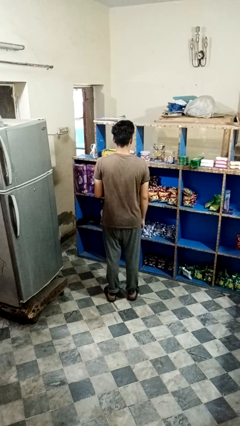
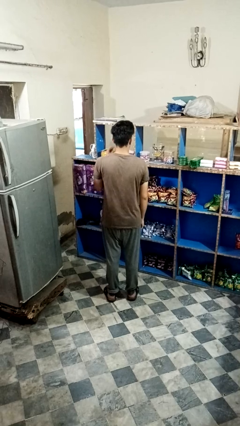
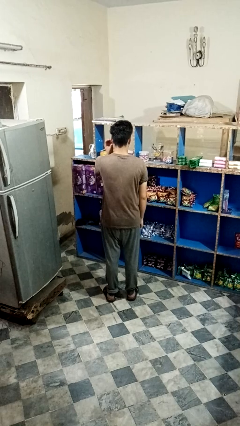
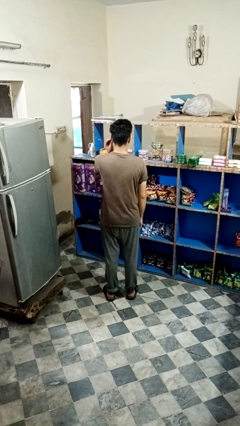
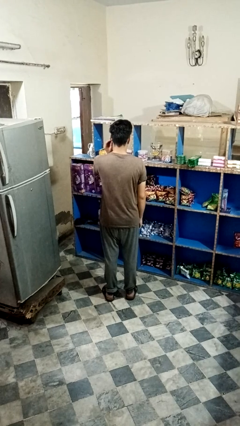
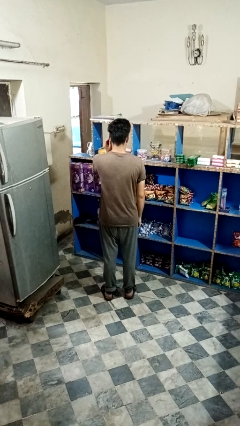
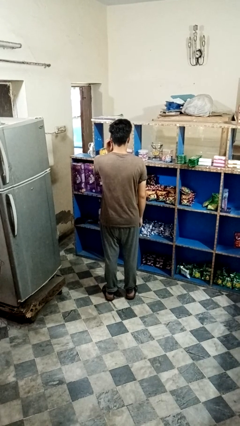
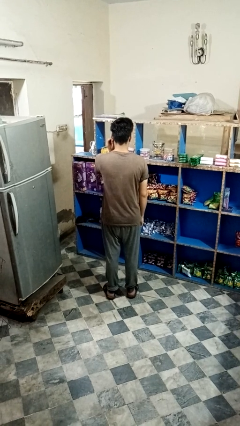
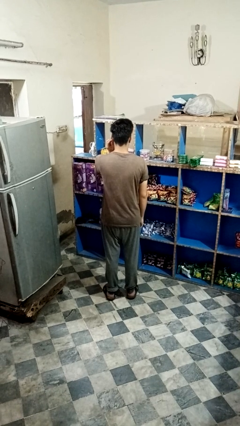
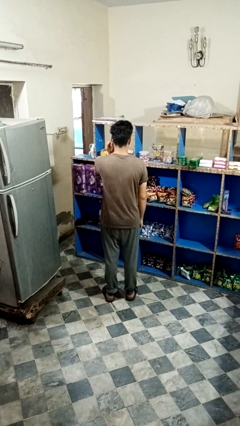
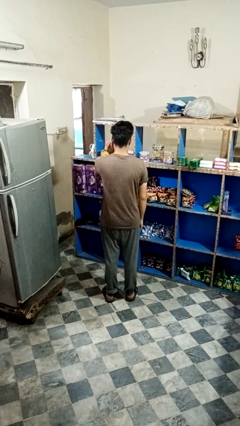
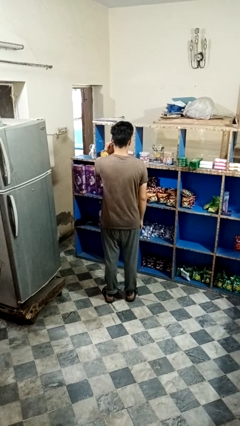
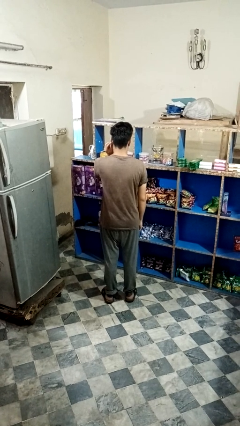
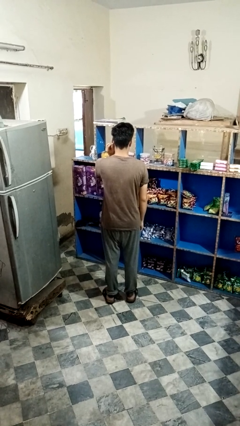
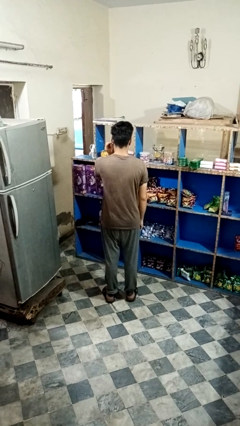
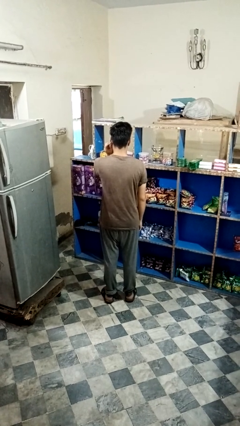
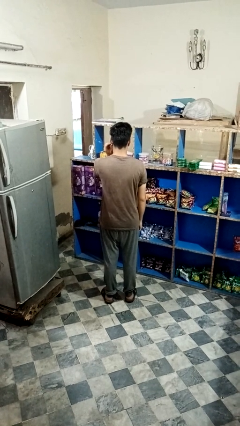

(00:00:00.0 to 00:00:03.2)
person touches earlobe

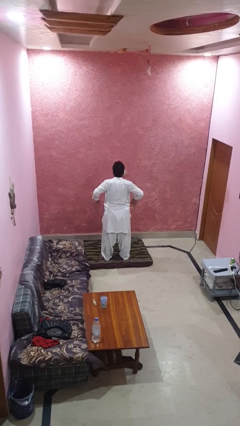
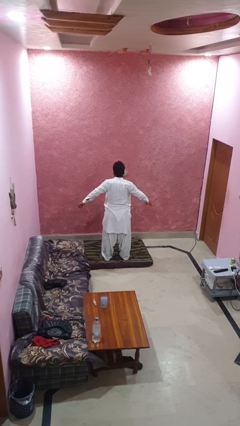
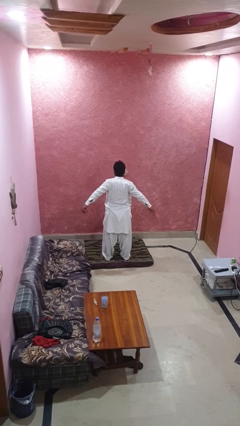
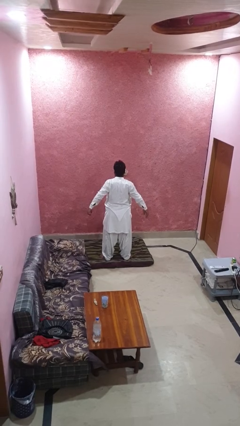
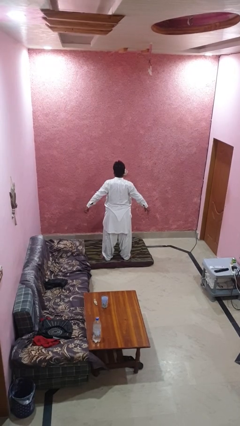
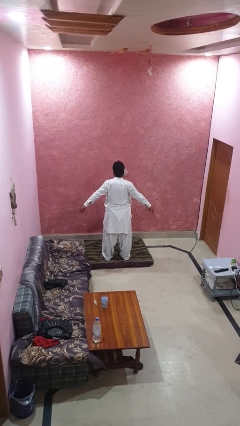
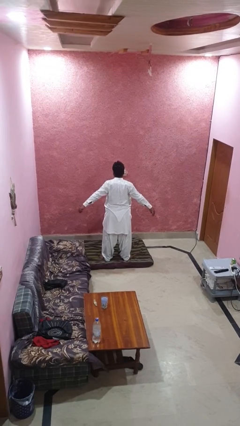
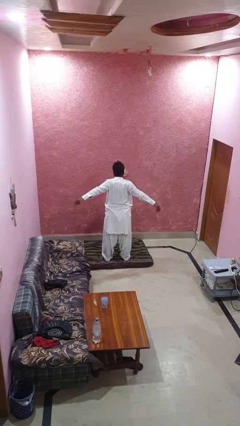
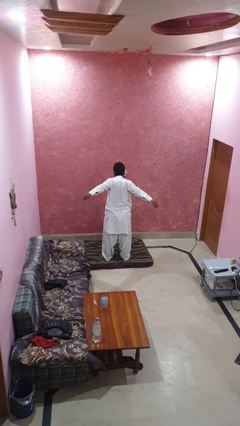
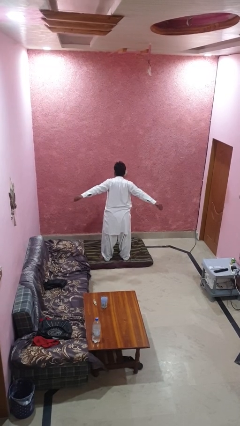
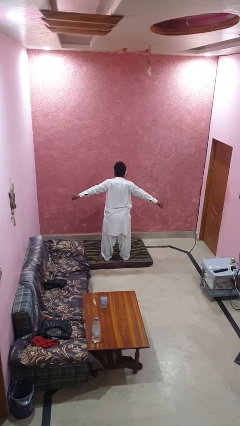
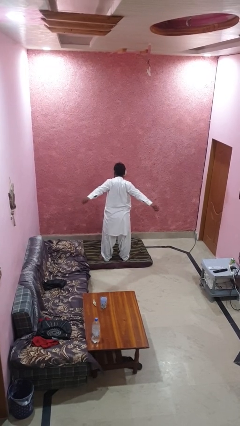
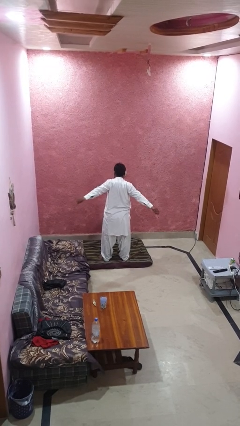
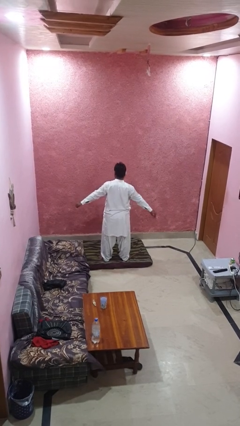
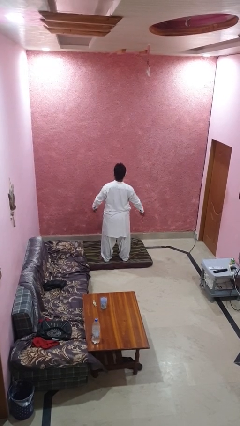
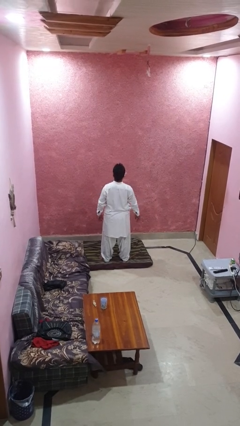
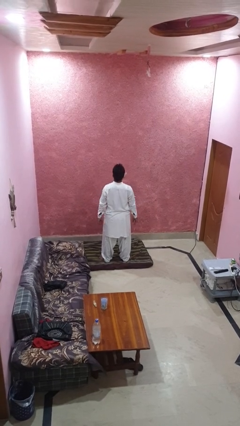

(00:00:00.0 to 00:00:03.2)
person stretches arms to side

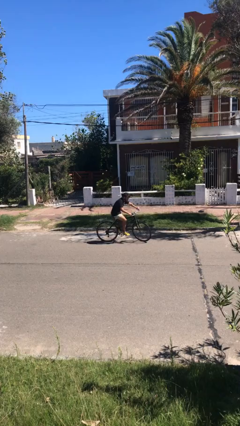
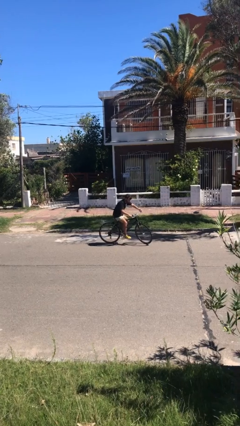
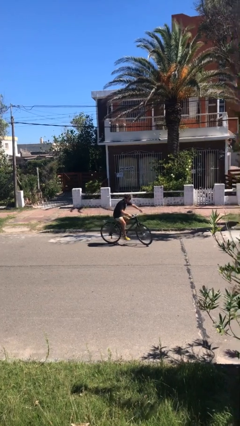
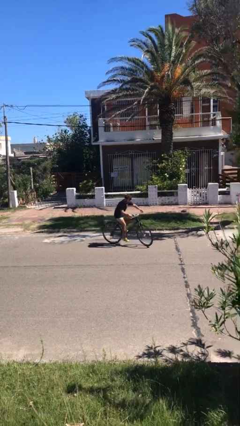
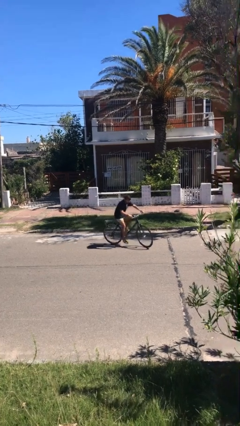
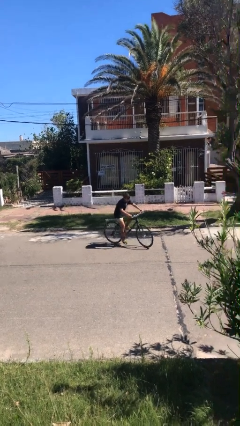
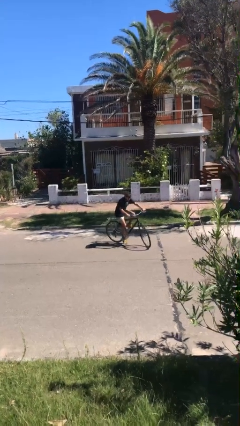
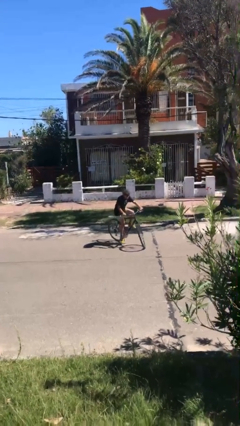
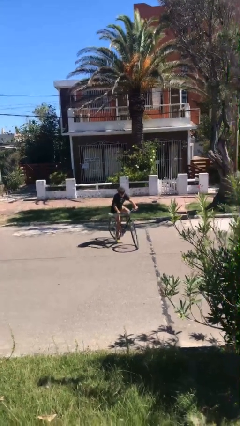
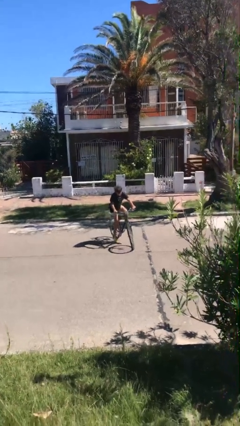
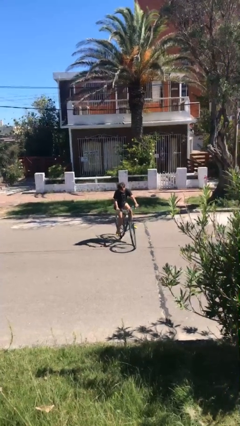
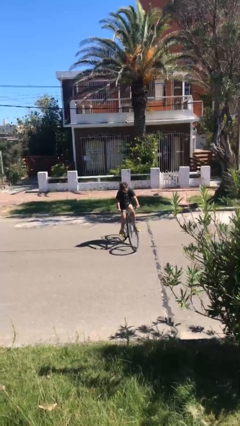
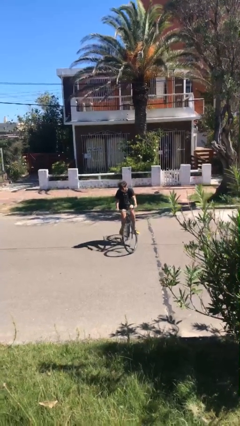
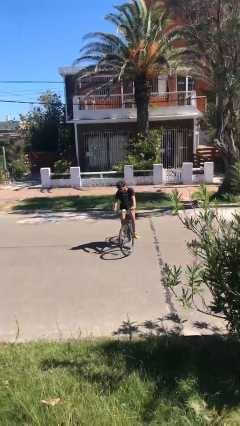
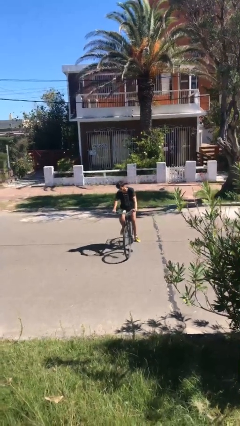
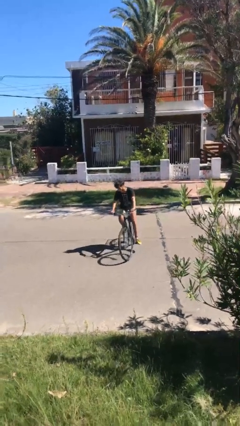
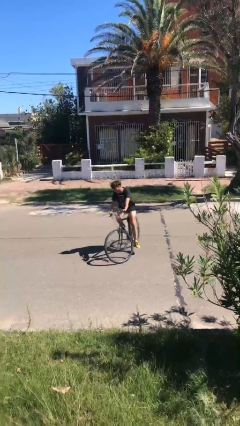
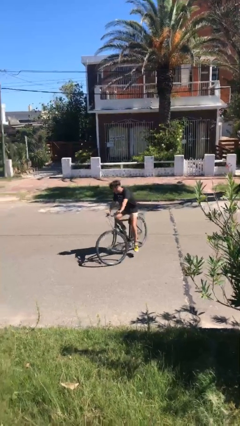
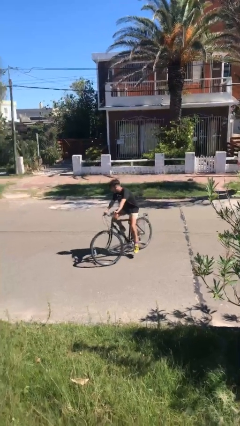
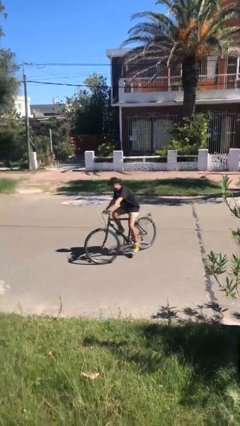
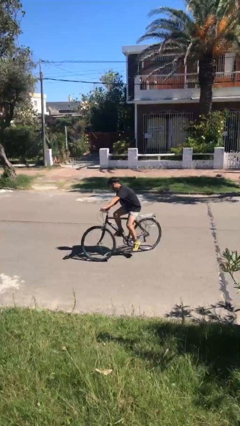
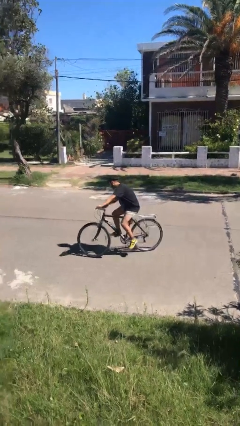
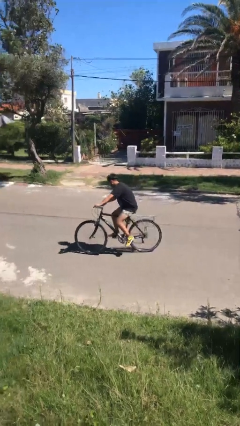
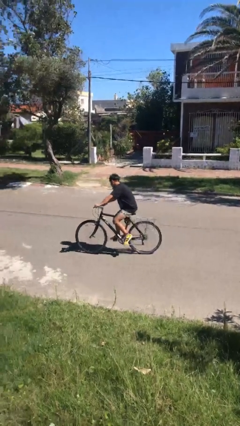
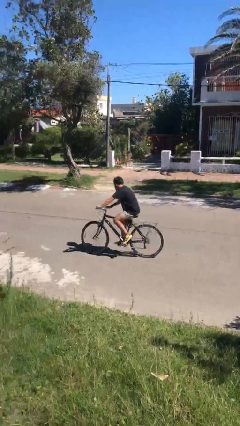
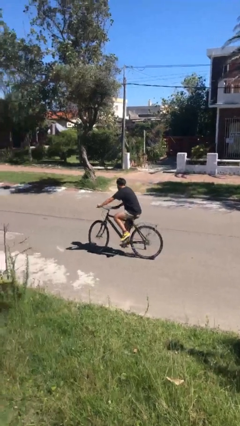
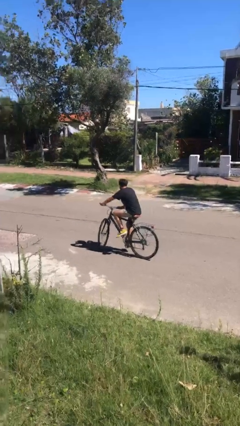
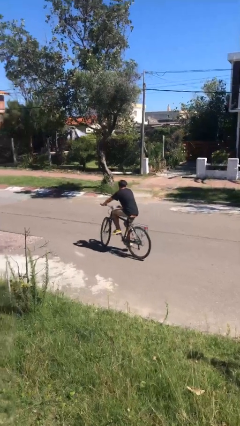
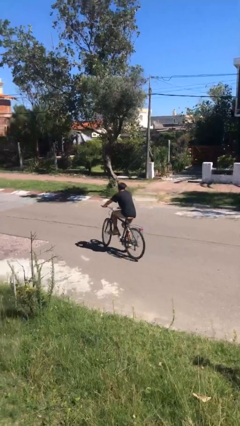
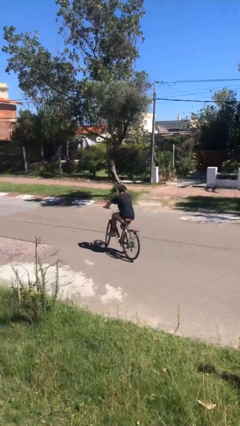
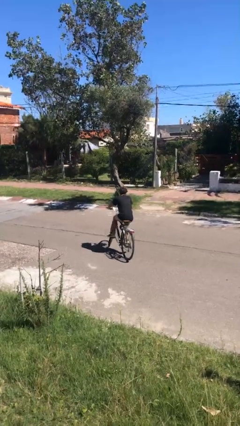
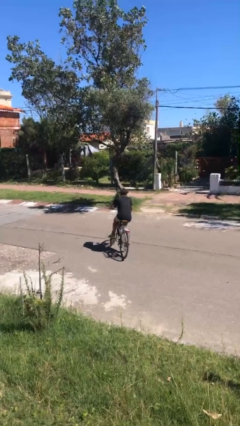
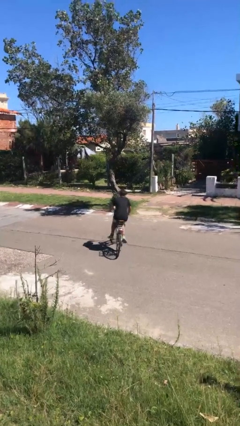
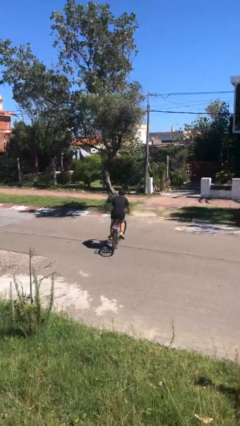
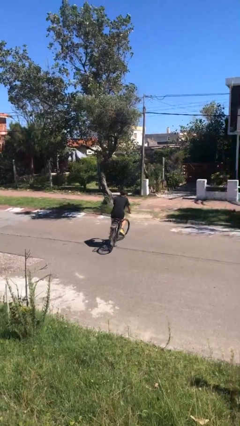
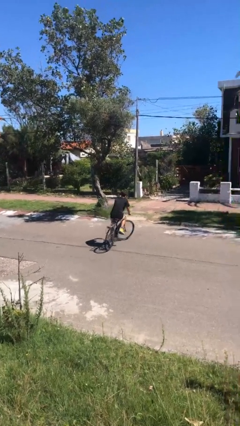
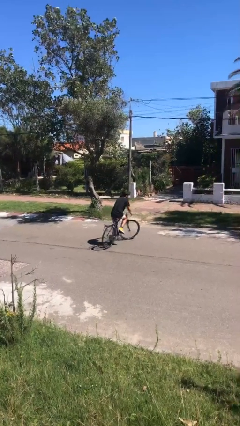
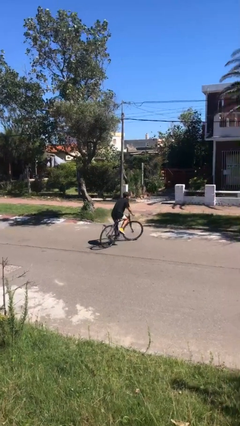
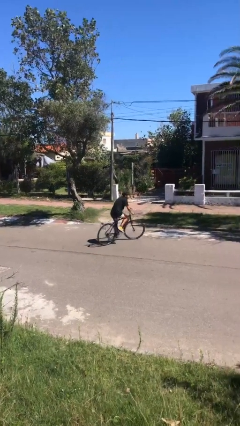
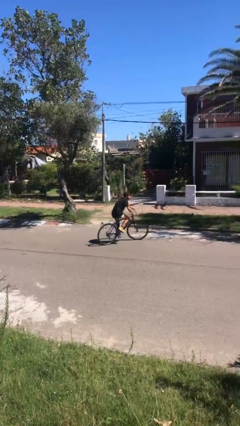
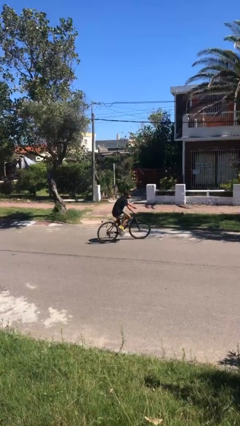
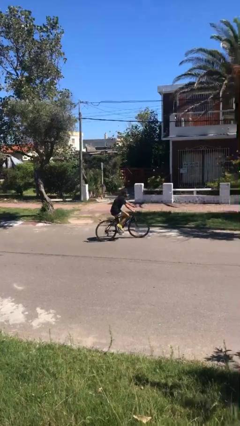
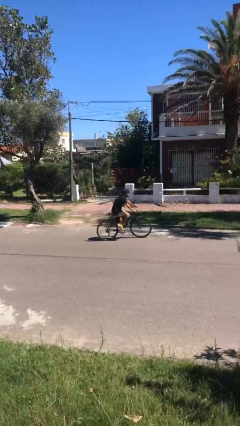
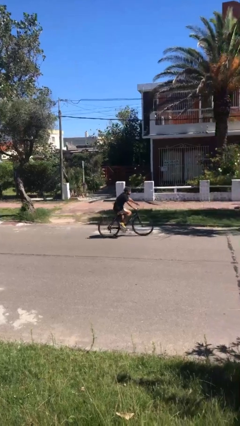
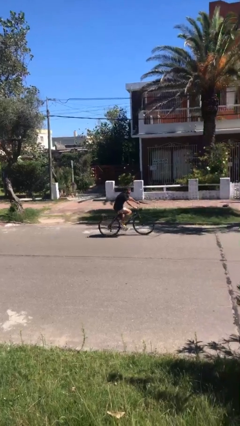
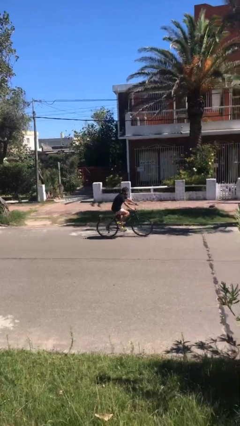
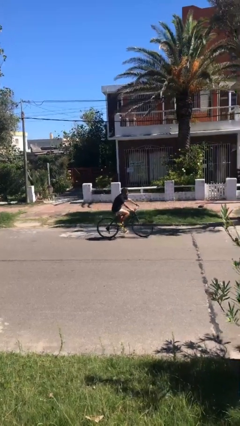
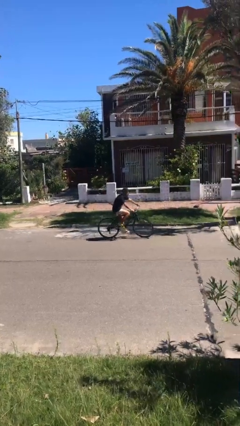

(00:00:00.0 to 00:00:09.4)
person rides bicycle

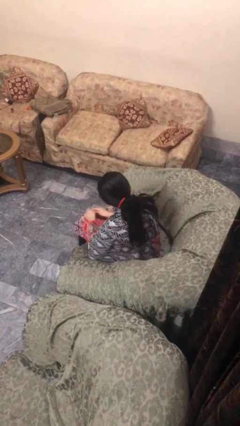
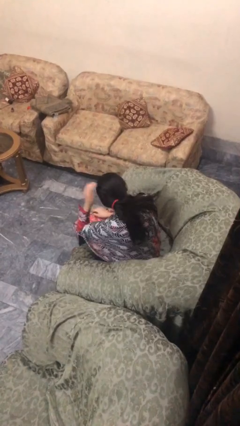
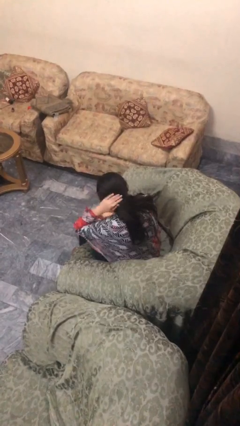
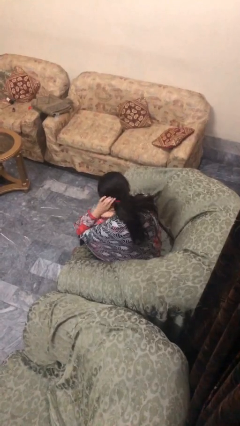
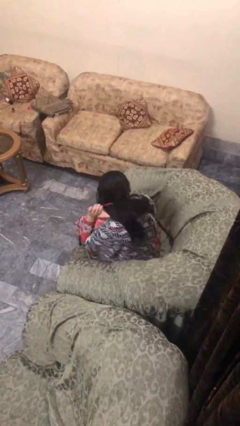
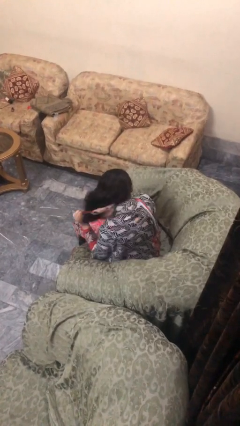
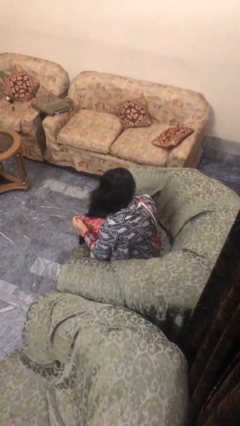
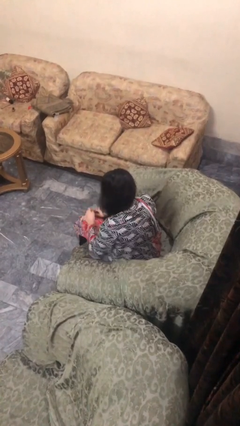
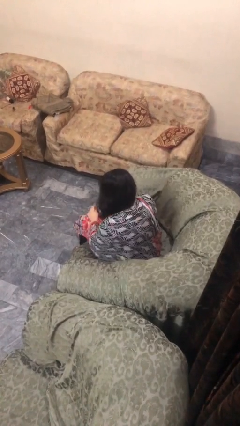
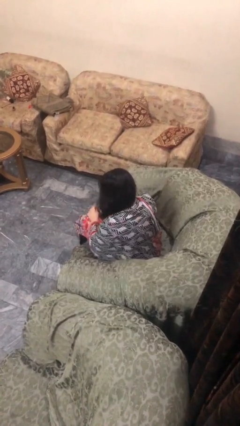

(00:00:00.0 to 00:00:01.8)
person takes off hairtie

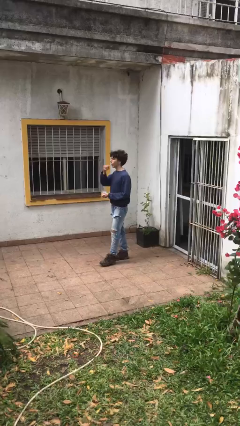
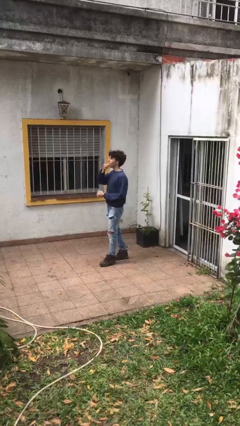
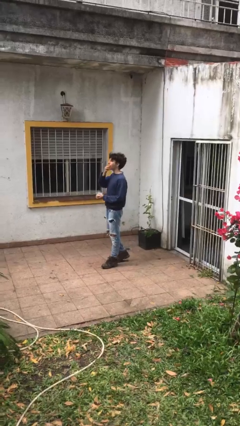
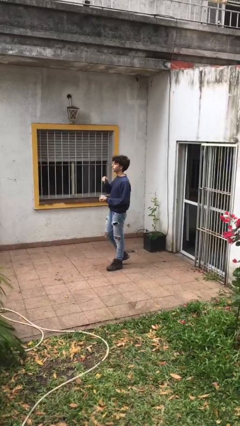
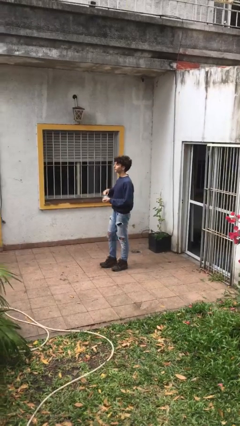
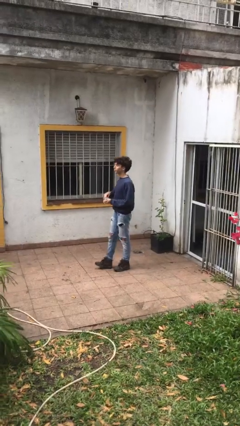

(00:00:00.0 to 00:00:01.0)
person eats snack from bag
